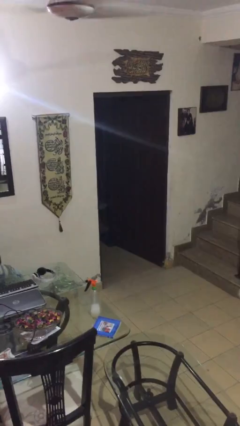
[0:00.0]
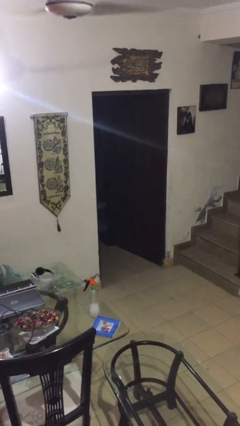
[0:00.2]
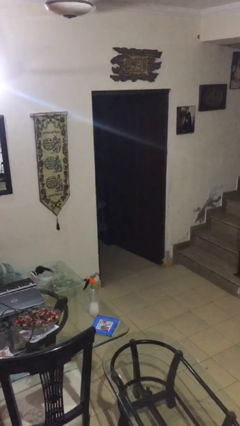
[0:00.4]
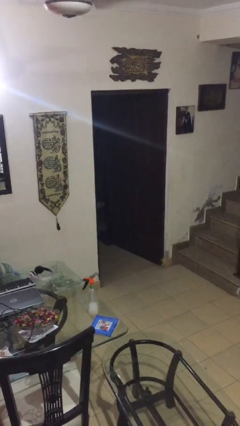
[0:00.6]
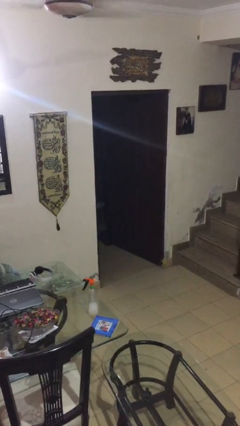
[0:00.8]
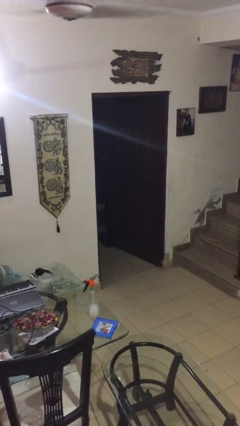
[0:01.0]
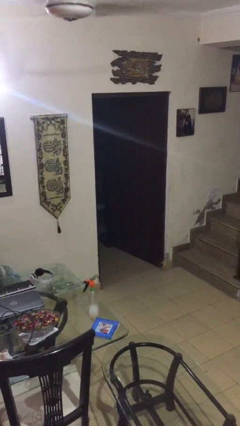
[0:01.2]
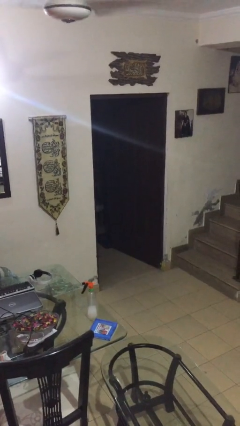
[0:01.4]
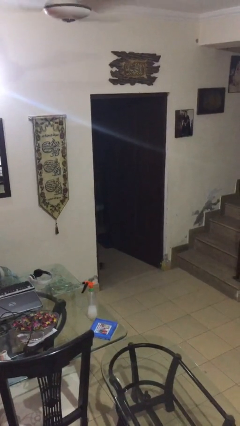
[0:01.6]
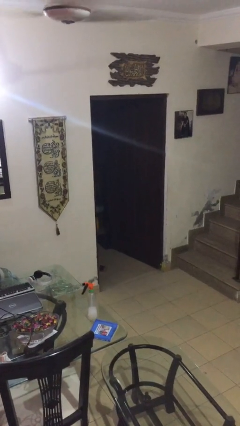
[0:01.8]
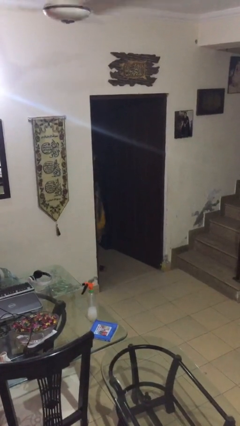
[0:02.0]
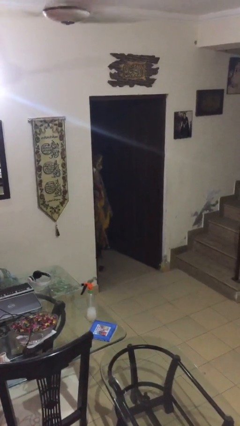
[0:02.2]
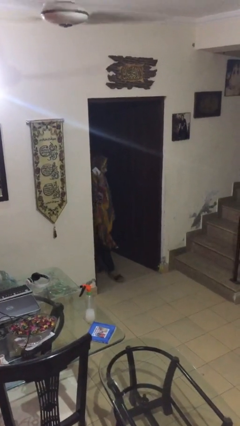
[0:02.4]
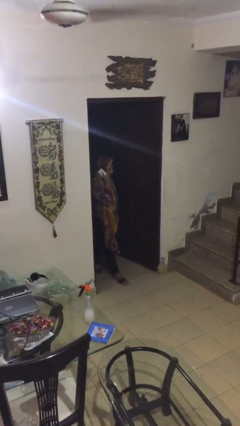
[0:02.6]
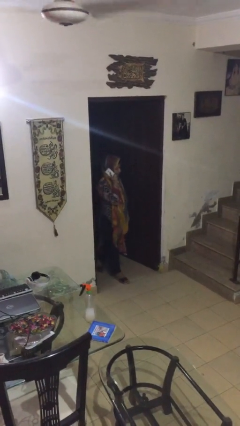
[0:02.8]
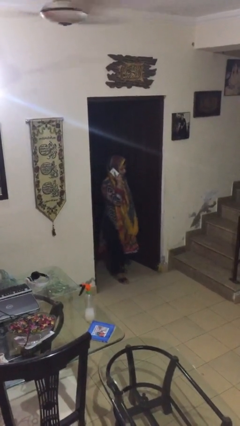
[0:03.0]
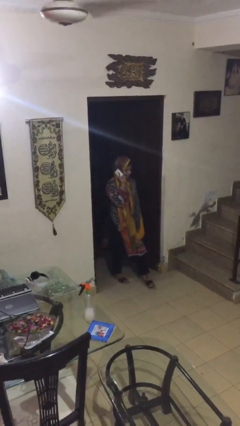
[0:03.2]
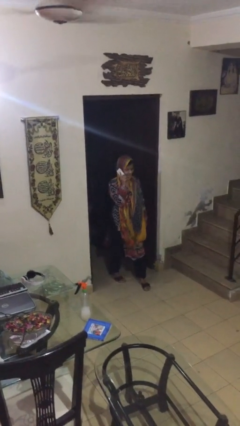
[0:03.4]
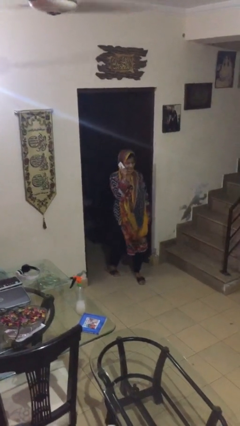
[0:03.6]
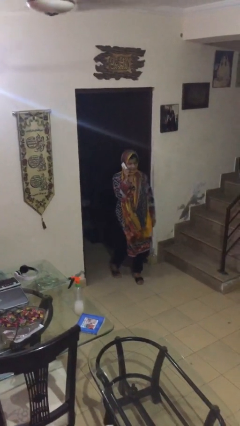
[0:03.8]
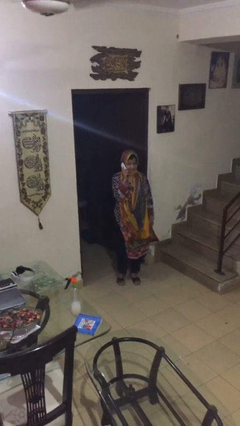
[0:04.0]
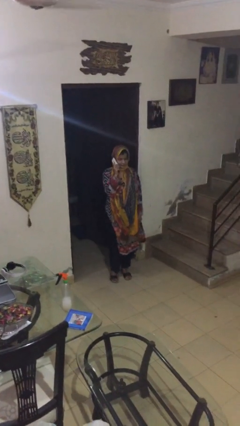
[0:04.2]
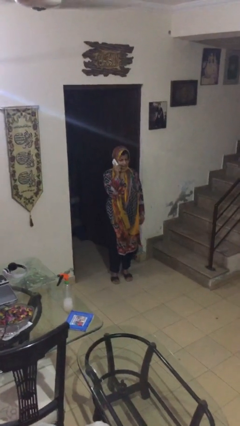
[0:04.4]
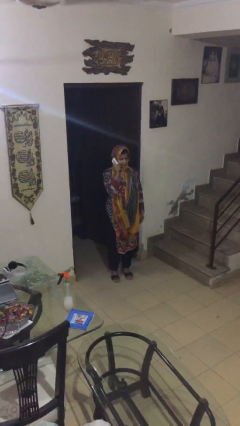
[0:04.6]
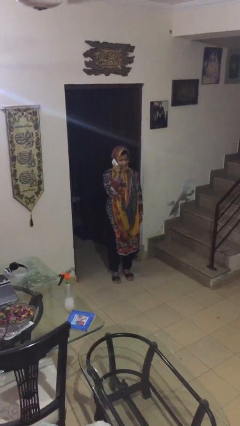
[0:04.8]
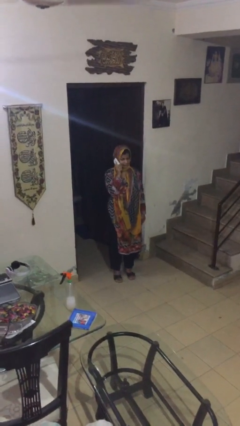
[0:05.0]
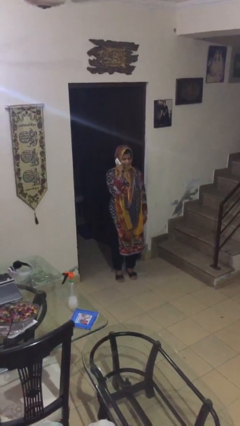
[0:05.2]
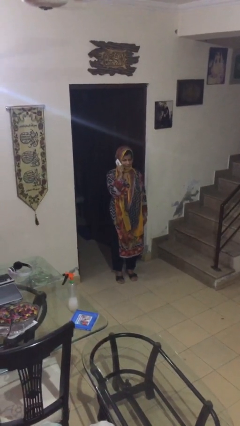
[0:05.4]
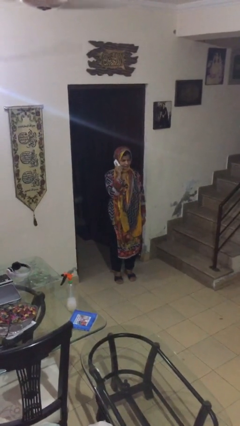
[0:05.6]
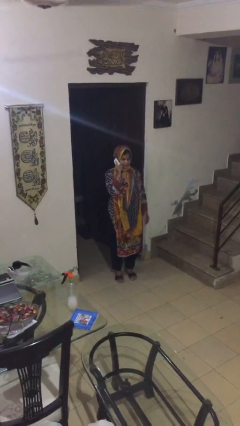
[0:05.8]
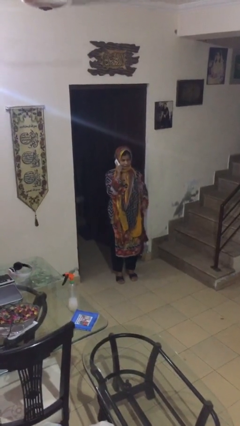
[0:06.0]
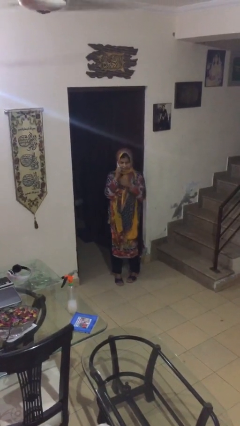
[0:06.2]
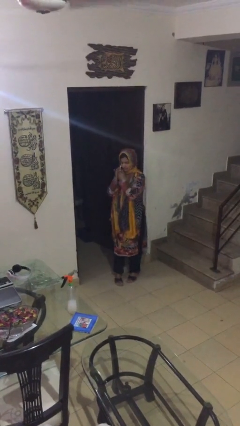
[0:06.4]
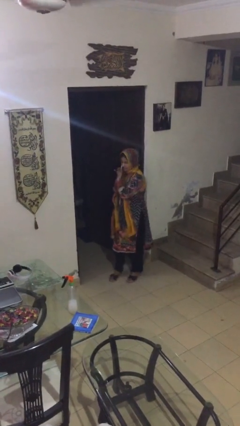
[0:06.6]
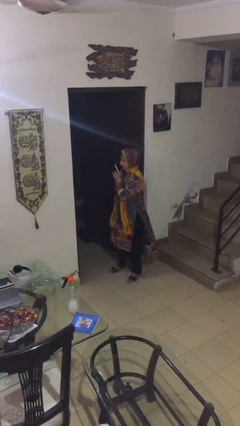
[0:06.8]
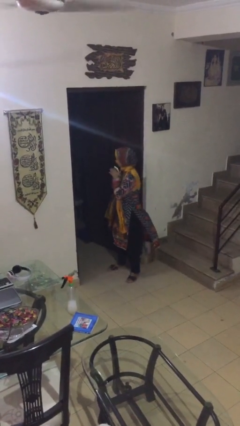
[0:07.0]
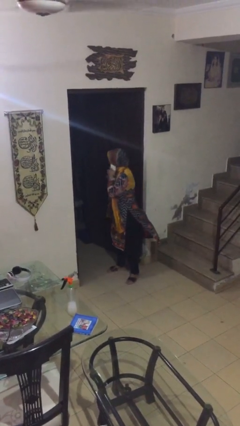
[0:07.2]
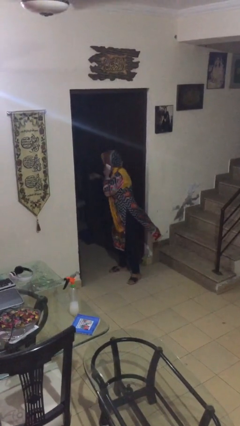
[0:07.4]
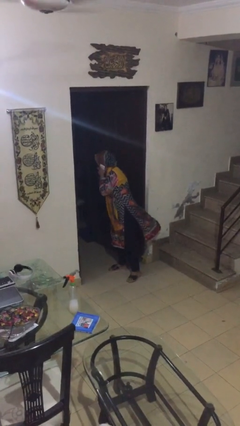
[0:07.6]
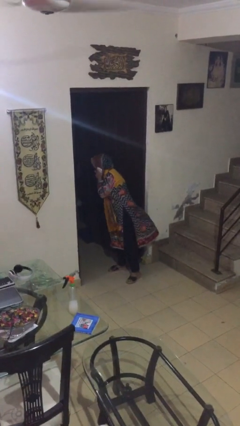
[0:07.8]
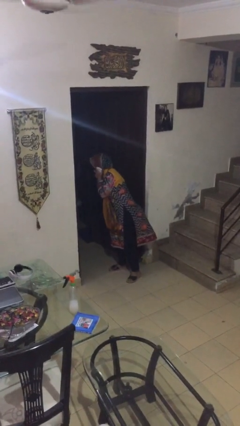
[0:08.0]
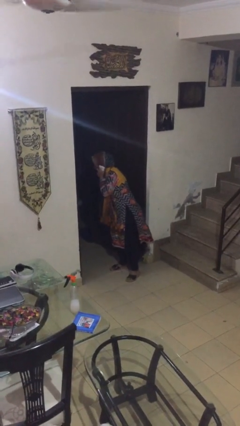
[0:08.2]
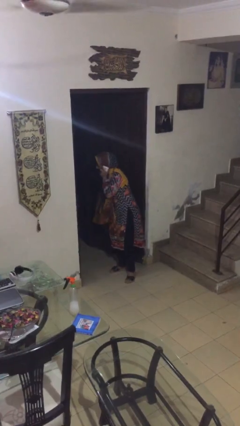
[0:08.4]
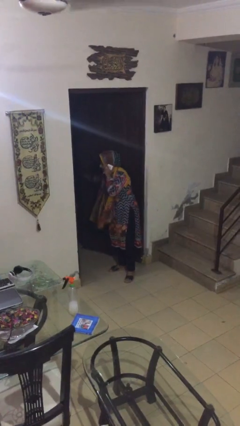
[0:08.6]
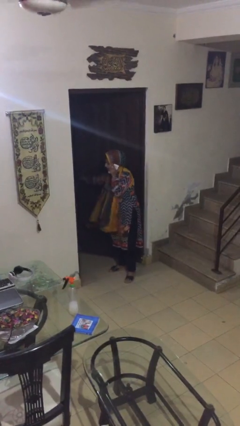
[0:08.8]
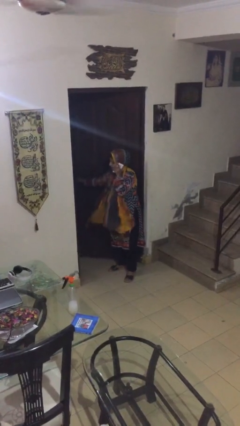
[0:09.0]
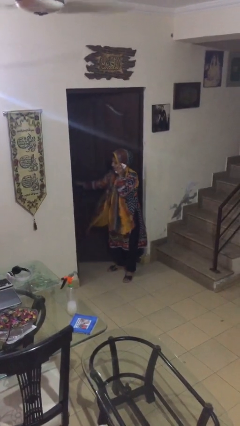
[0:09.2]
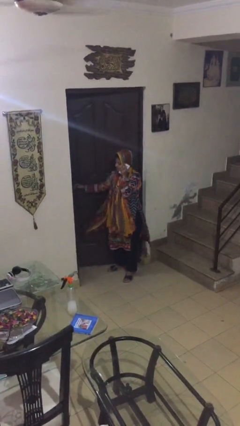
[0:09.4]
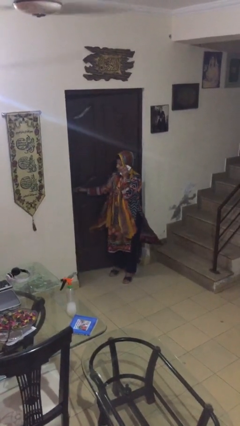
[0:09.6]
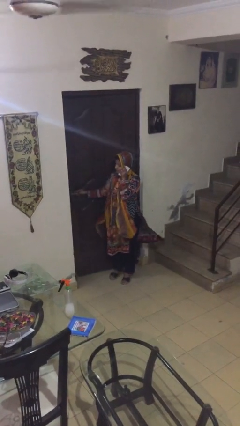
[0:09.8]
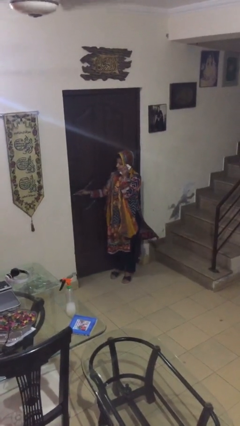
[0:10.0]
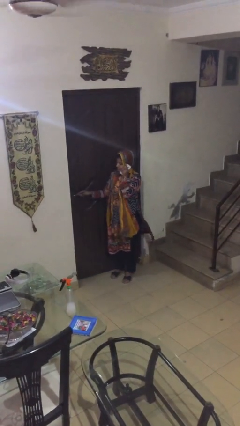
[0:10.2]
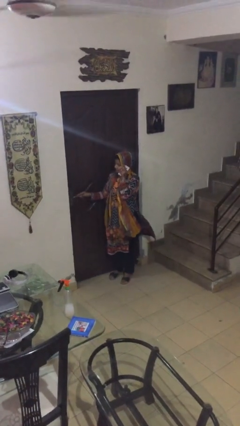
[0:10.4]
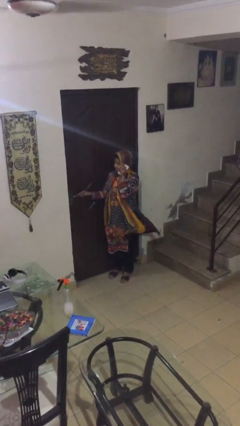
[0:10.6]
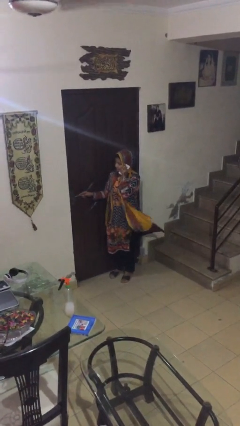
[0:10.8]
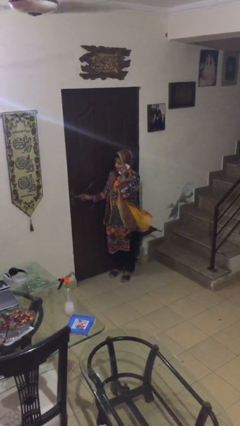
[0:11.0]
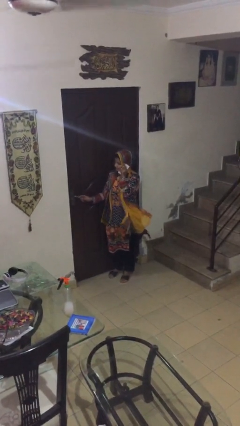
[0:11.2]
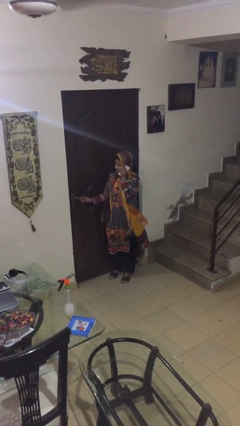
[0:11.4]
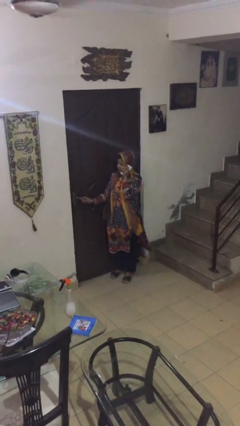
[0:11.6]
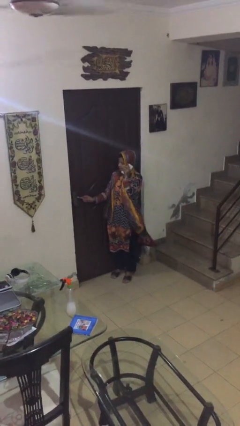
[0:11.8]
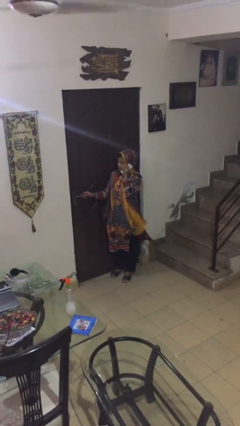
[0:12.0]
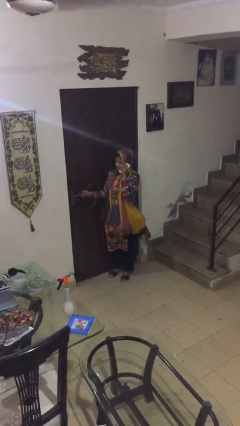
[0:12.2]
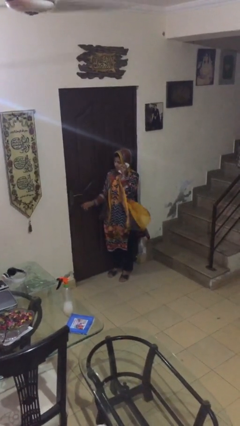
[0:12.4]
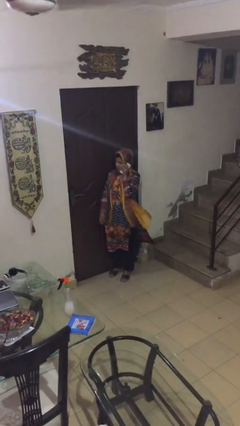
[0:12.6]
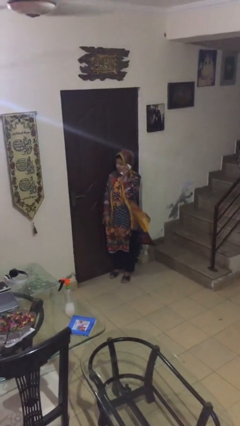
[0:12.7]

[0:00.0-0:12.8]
person enters scene through structure

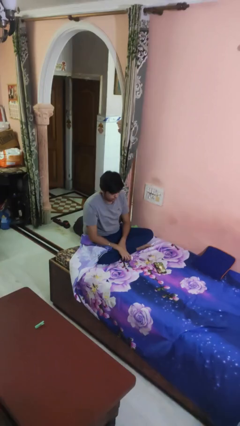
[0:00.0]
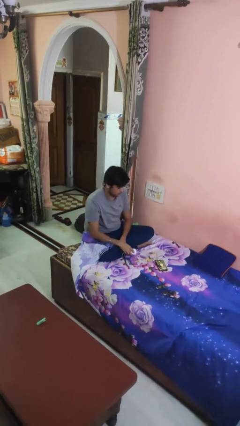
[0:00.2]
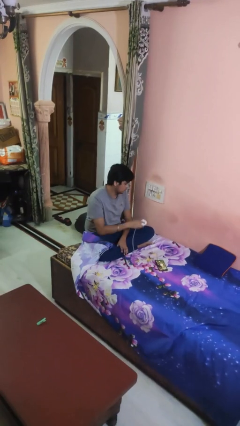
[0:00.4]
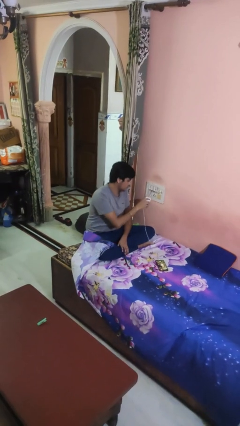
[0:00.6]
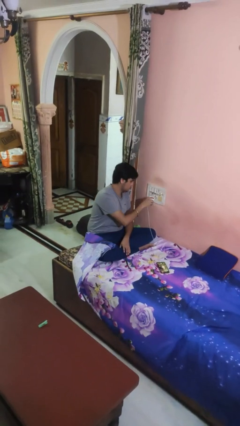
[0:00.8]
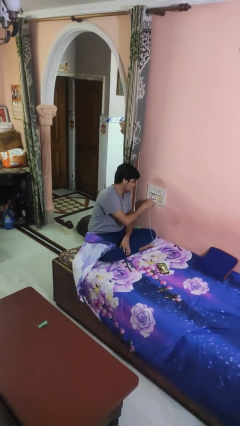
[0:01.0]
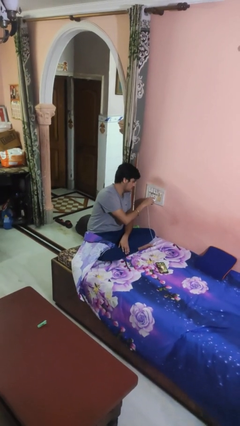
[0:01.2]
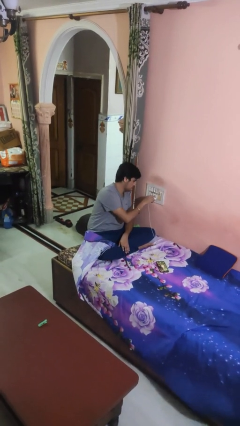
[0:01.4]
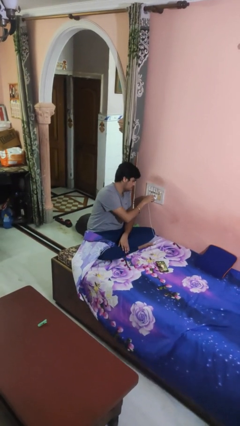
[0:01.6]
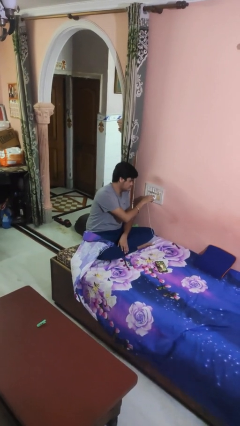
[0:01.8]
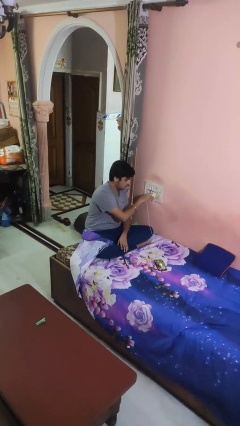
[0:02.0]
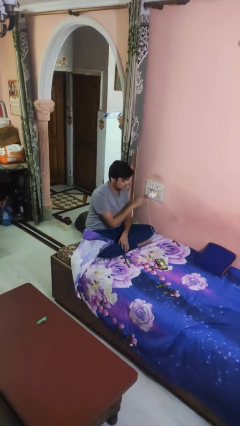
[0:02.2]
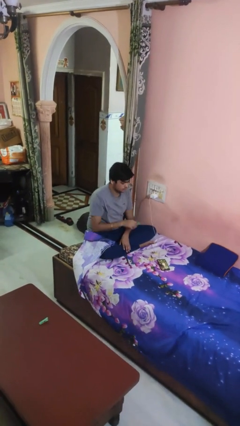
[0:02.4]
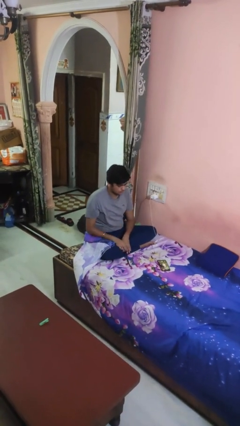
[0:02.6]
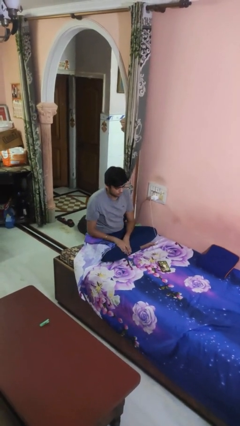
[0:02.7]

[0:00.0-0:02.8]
person plugs into electrical socket

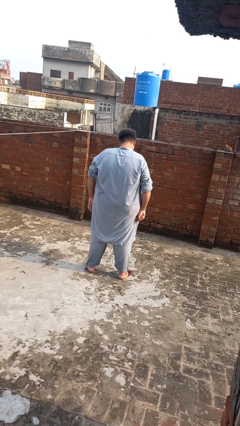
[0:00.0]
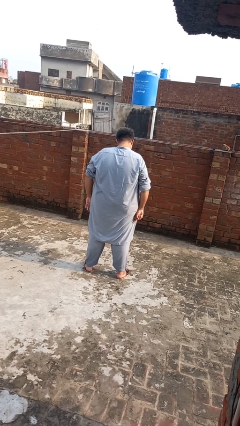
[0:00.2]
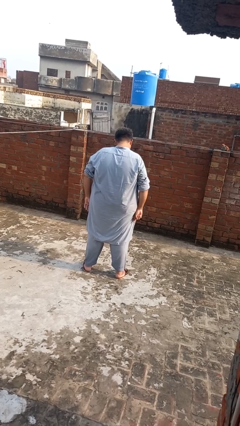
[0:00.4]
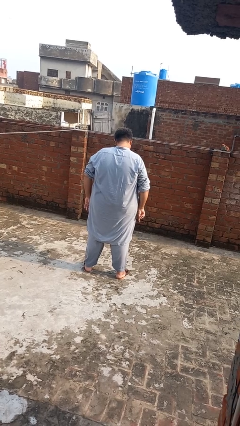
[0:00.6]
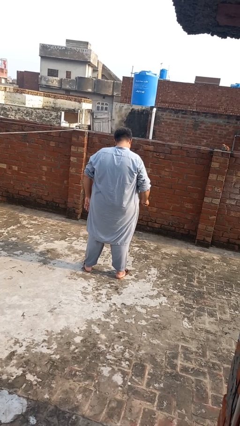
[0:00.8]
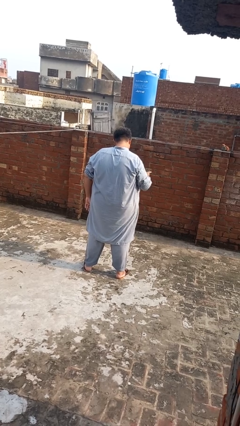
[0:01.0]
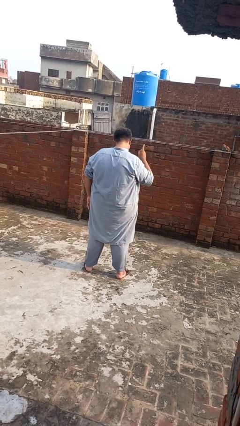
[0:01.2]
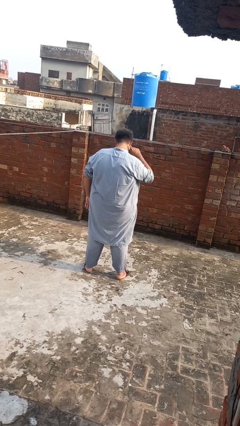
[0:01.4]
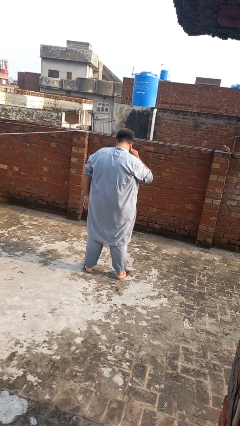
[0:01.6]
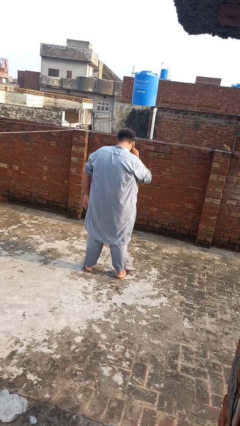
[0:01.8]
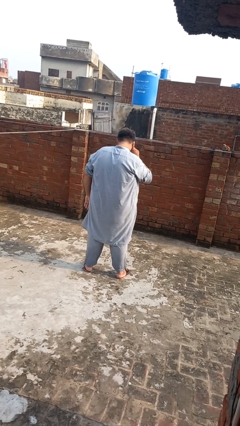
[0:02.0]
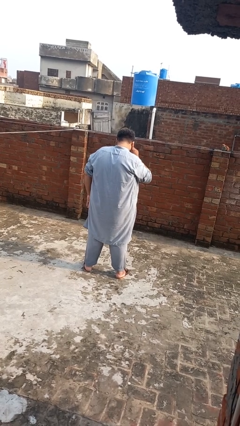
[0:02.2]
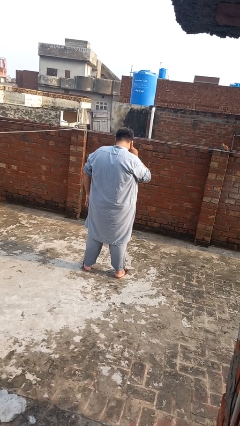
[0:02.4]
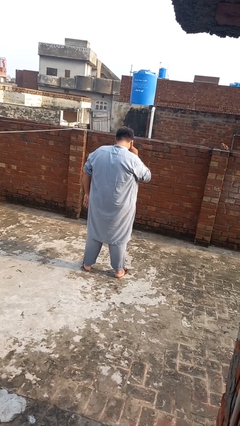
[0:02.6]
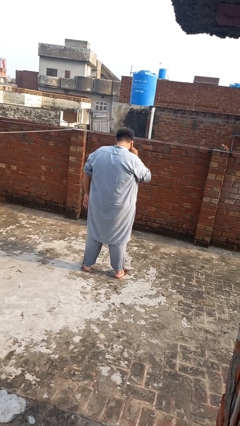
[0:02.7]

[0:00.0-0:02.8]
person gestures listen closely
